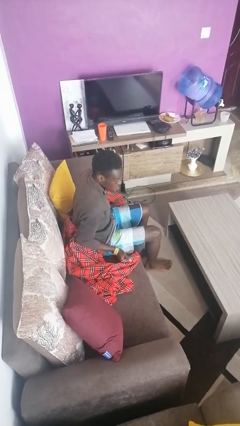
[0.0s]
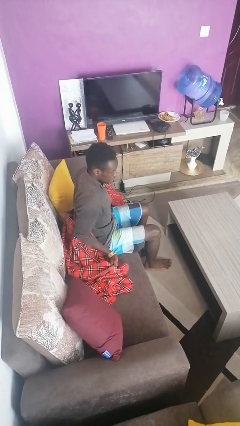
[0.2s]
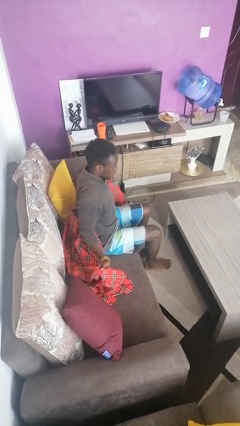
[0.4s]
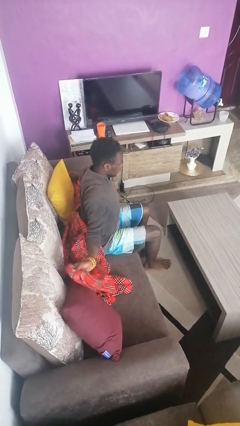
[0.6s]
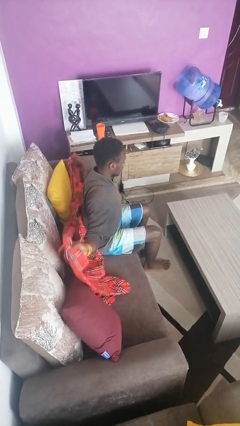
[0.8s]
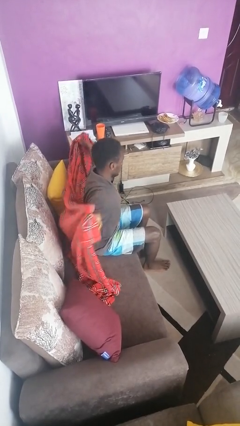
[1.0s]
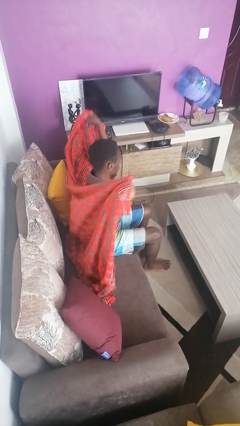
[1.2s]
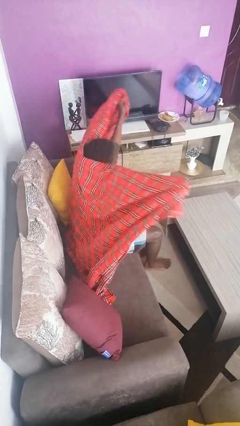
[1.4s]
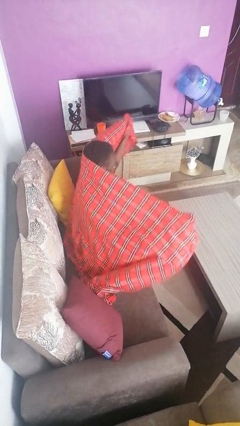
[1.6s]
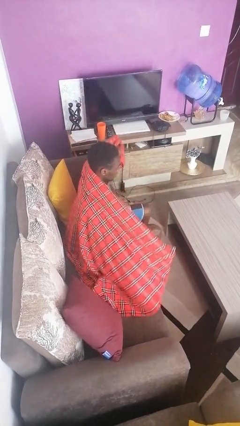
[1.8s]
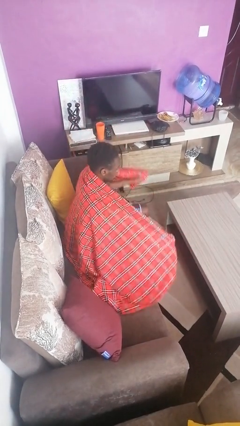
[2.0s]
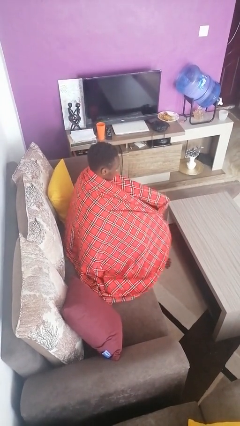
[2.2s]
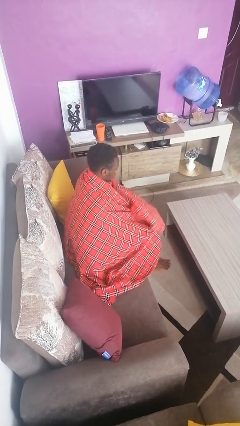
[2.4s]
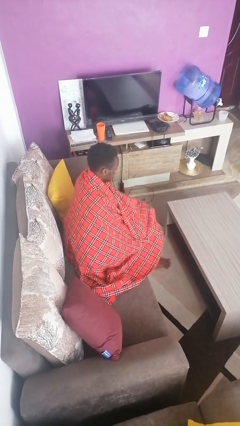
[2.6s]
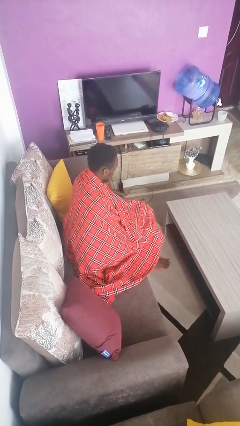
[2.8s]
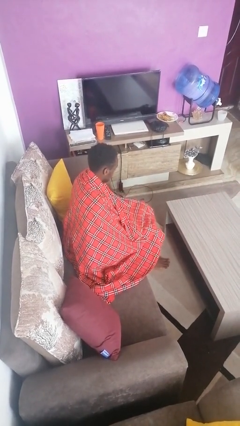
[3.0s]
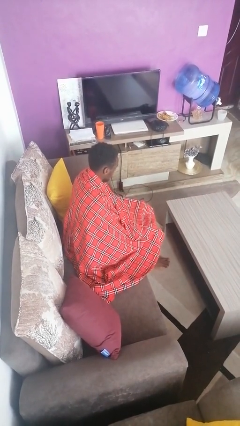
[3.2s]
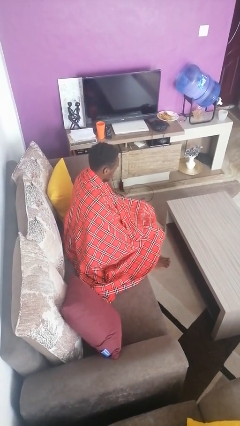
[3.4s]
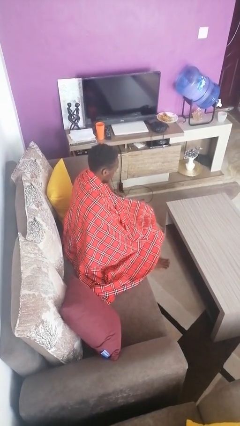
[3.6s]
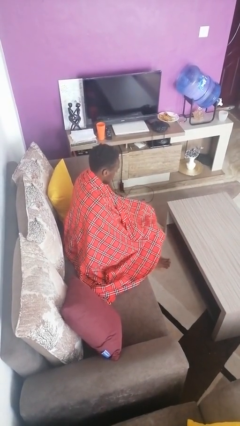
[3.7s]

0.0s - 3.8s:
person covers with blanket

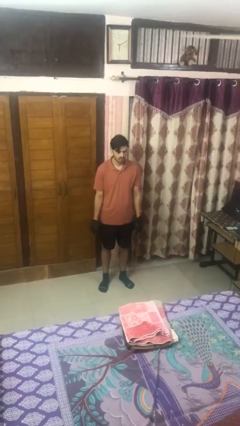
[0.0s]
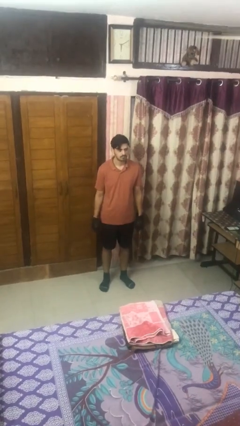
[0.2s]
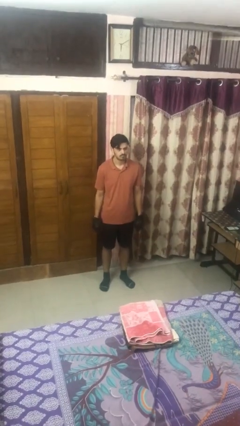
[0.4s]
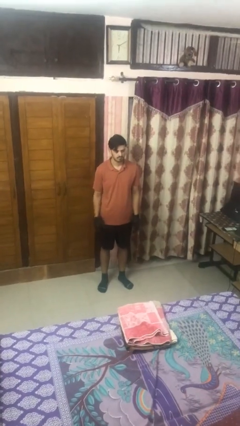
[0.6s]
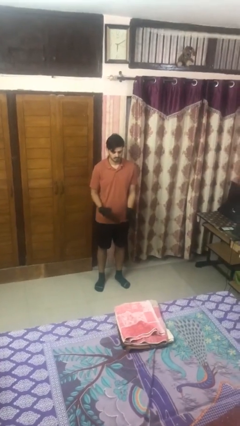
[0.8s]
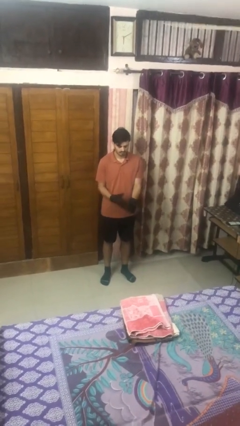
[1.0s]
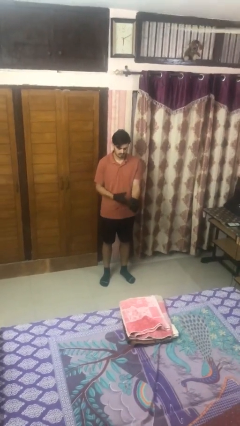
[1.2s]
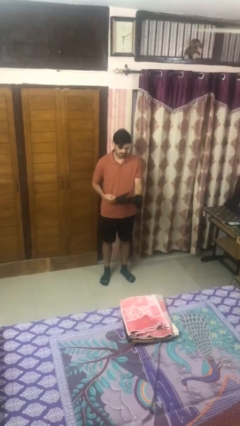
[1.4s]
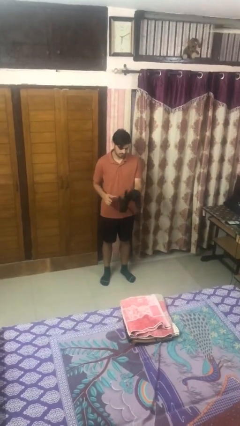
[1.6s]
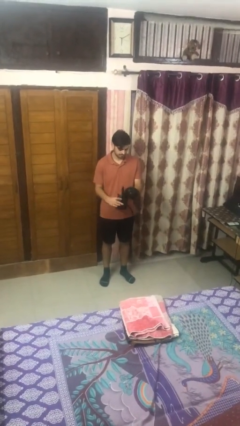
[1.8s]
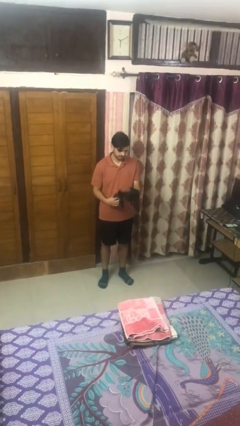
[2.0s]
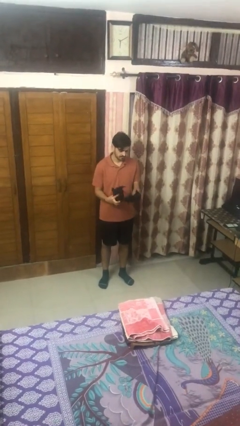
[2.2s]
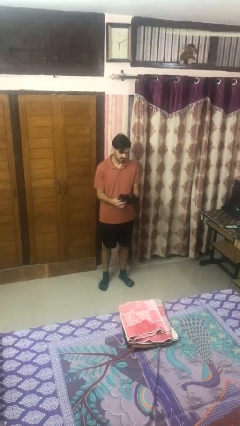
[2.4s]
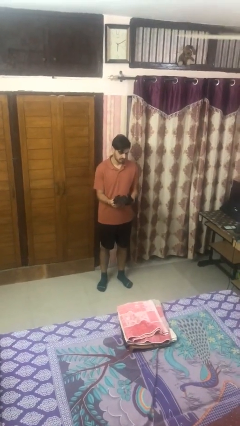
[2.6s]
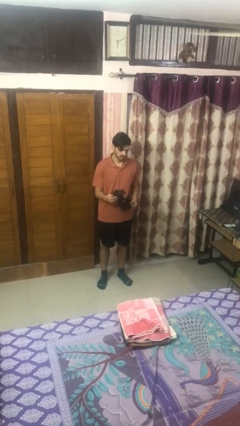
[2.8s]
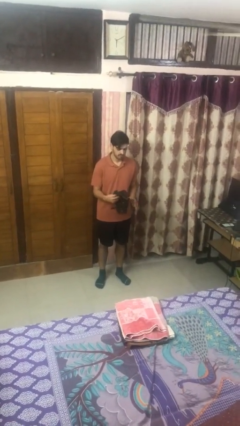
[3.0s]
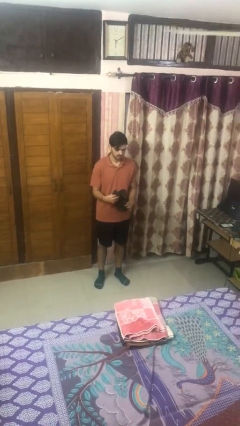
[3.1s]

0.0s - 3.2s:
person takes off gloves

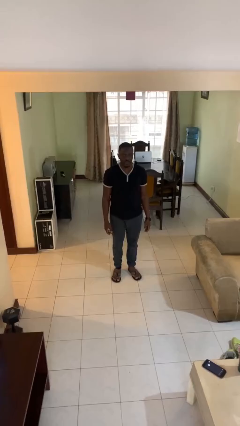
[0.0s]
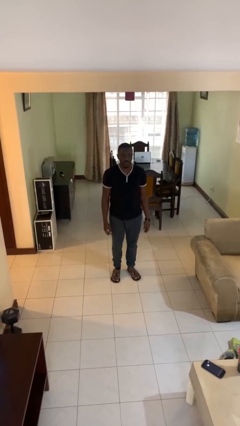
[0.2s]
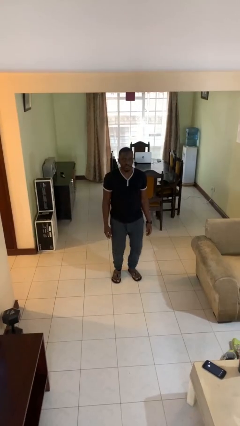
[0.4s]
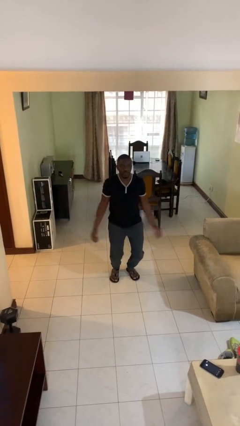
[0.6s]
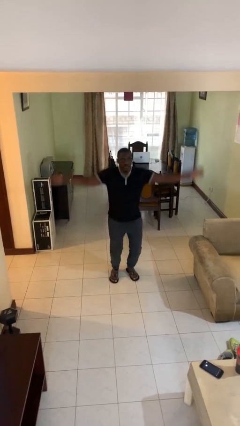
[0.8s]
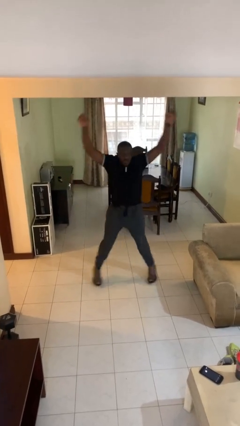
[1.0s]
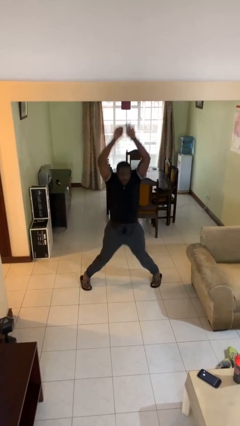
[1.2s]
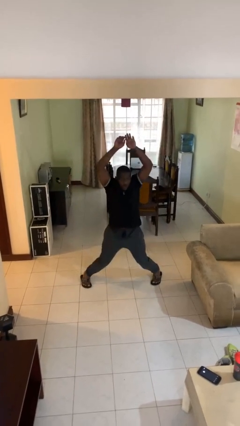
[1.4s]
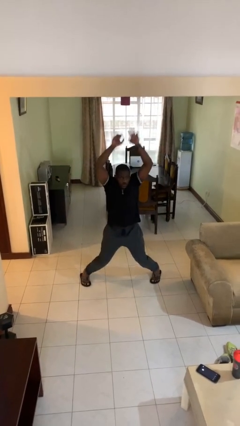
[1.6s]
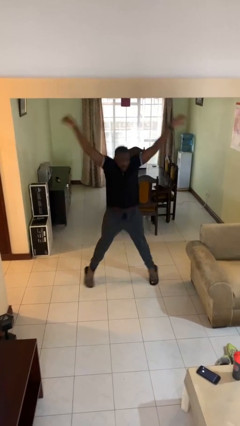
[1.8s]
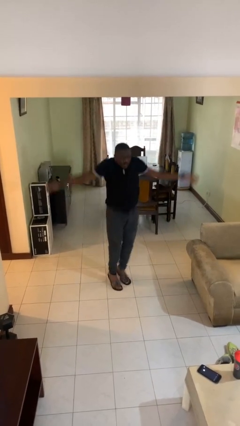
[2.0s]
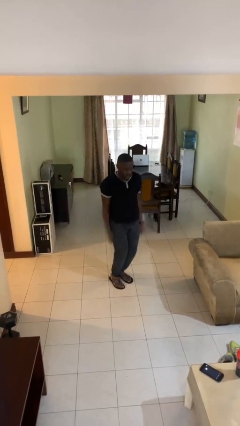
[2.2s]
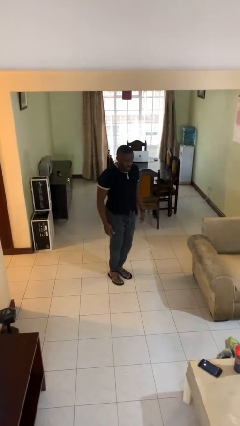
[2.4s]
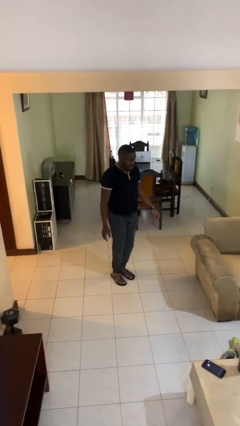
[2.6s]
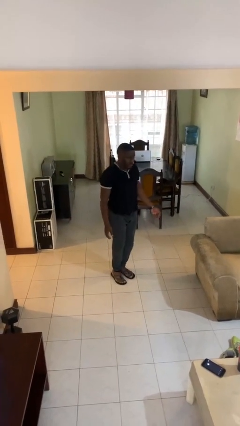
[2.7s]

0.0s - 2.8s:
person exercises with jumping jacks

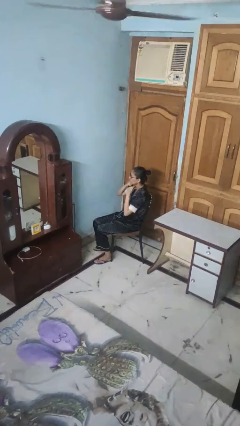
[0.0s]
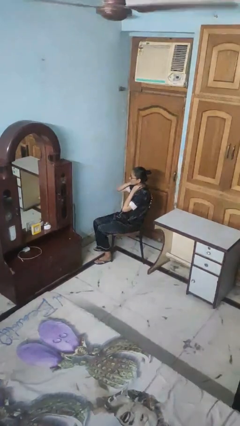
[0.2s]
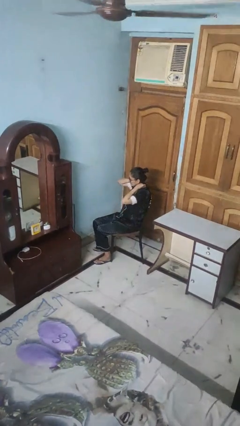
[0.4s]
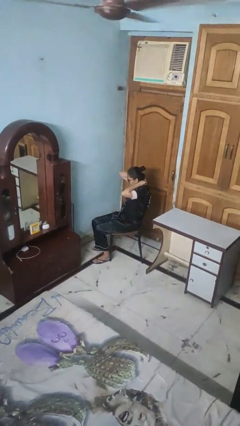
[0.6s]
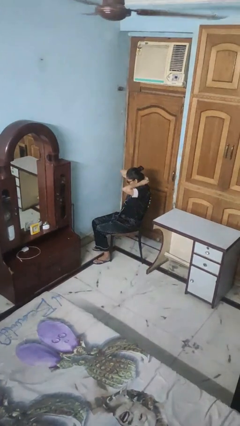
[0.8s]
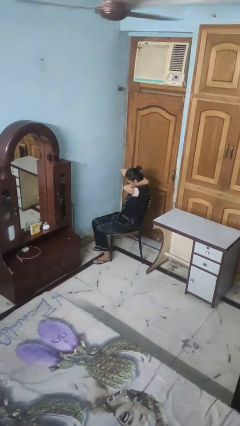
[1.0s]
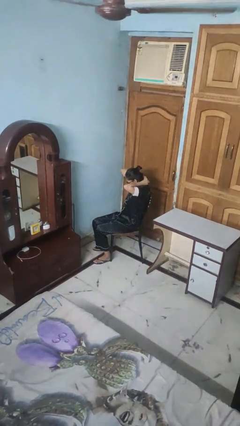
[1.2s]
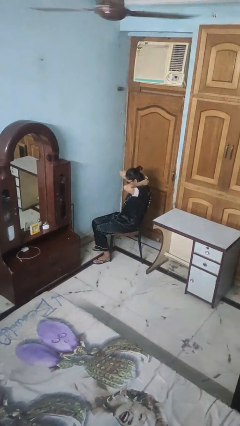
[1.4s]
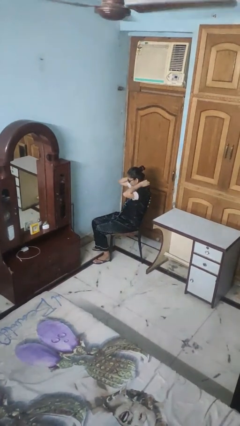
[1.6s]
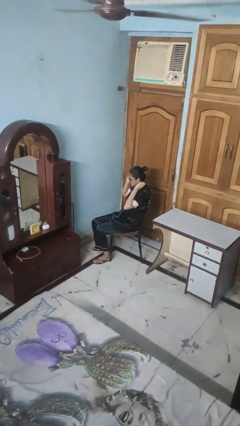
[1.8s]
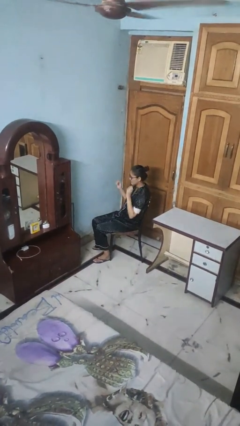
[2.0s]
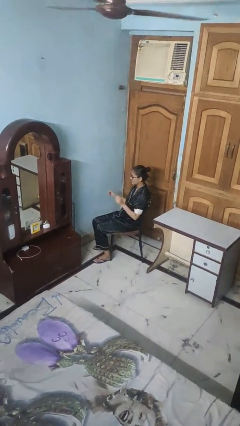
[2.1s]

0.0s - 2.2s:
person puts on necklace

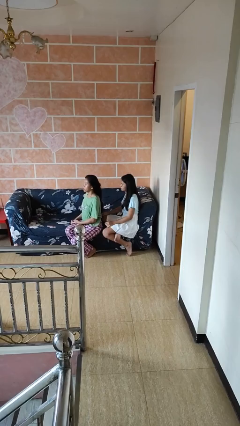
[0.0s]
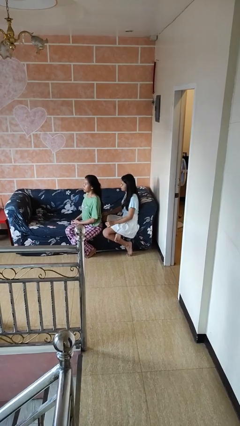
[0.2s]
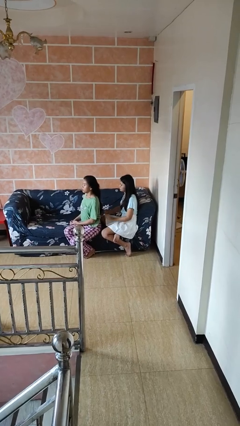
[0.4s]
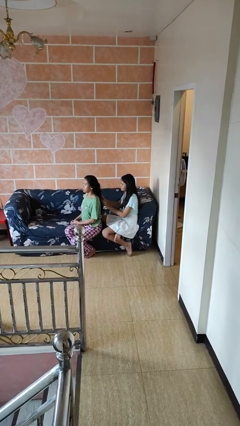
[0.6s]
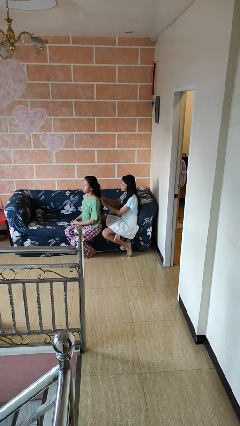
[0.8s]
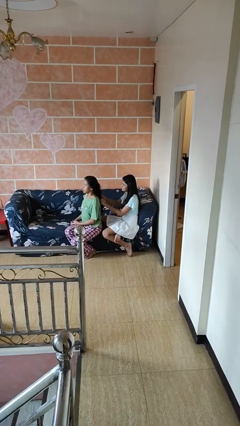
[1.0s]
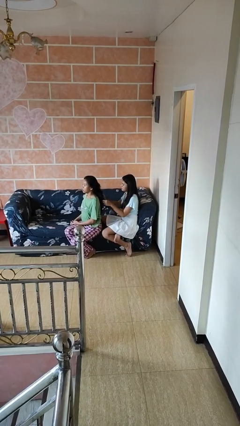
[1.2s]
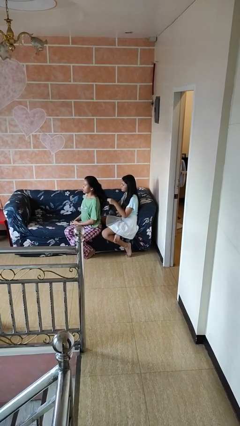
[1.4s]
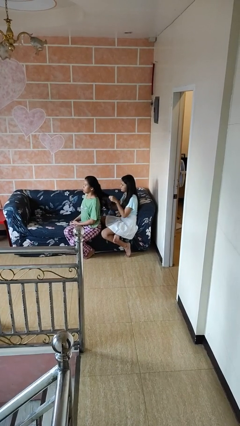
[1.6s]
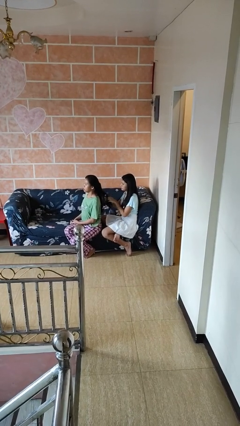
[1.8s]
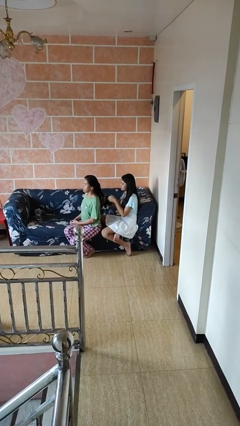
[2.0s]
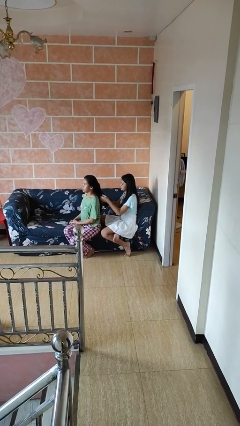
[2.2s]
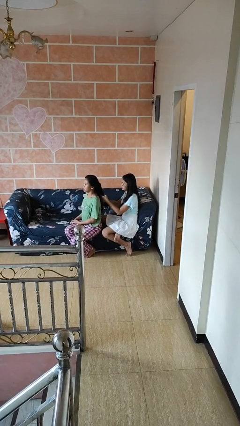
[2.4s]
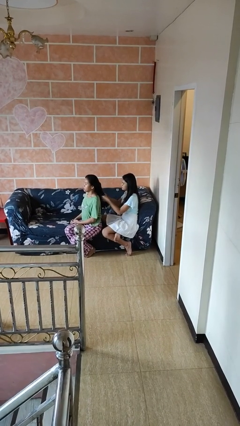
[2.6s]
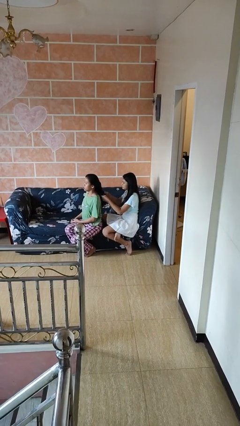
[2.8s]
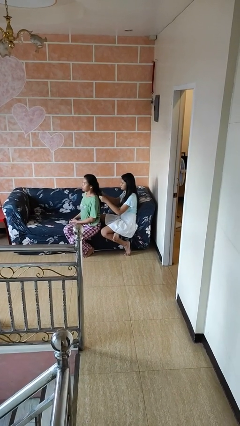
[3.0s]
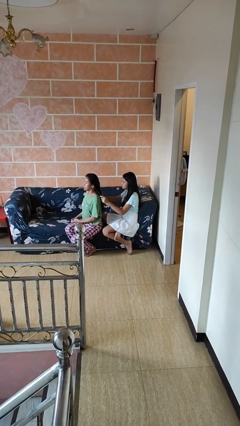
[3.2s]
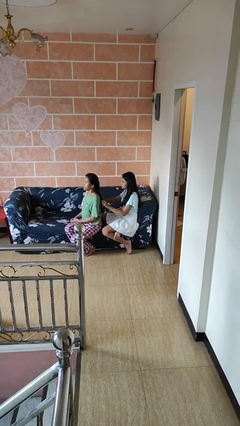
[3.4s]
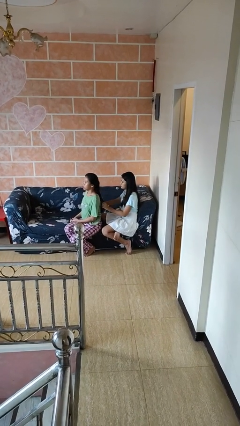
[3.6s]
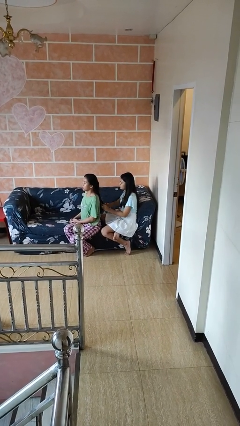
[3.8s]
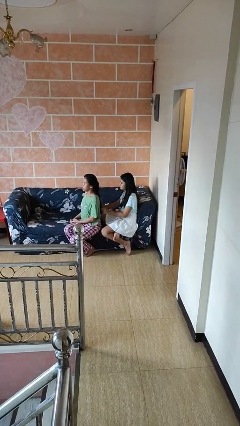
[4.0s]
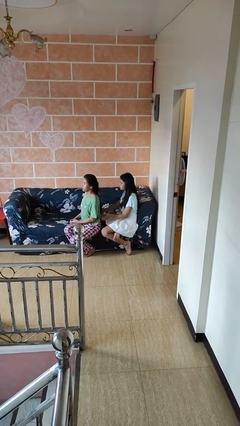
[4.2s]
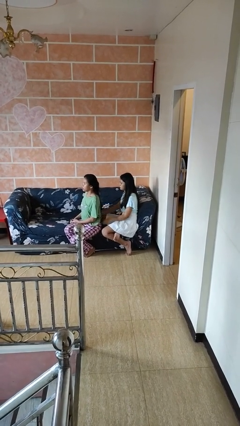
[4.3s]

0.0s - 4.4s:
person braids hair of person

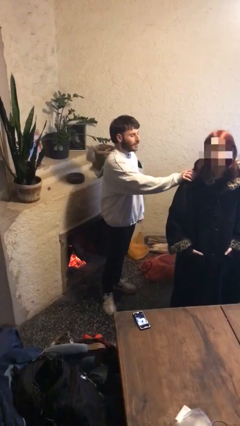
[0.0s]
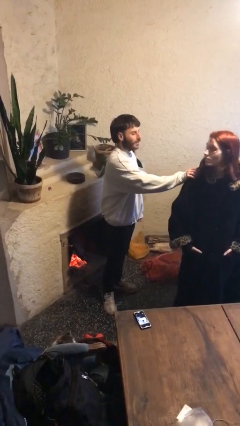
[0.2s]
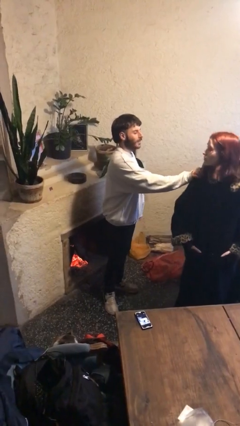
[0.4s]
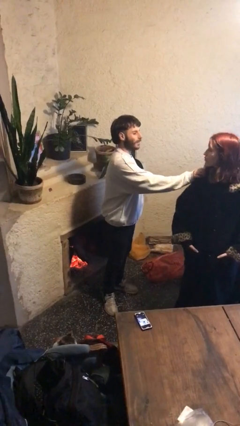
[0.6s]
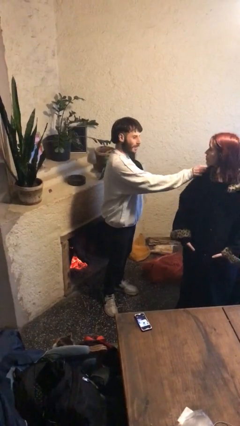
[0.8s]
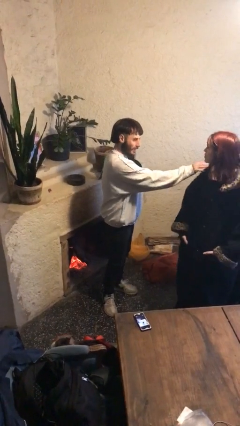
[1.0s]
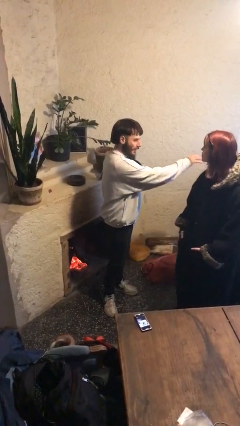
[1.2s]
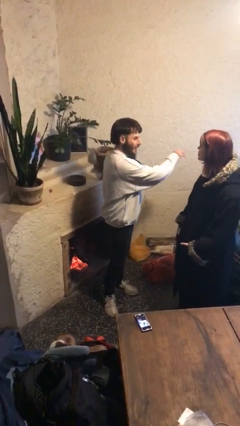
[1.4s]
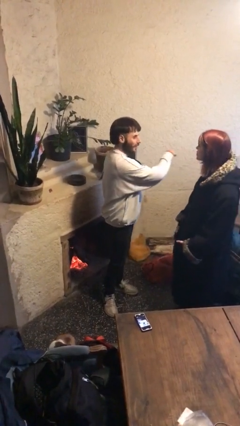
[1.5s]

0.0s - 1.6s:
person spins person around
